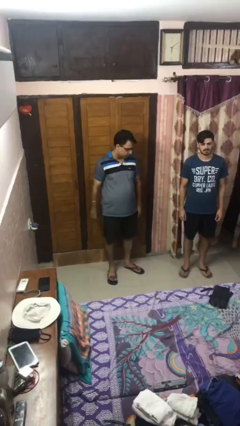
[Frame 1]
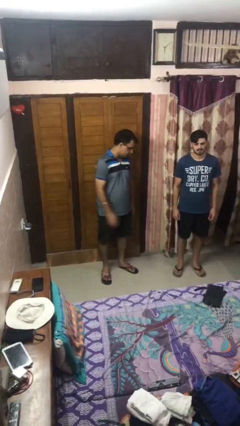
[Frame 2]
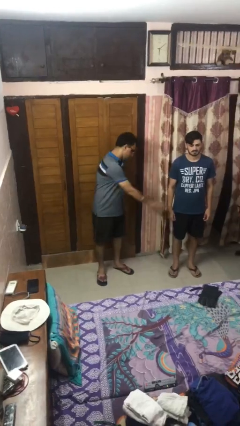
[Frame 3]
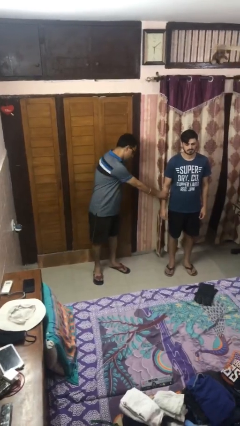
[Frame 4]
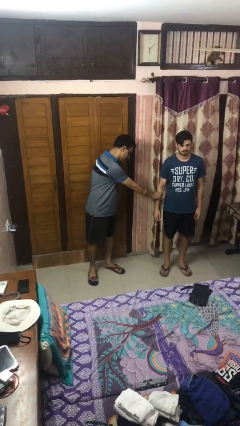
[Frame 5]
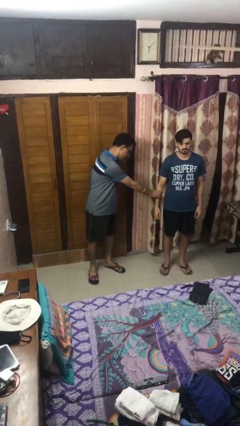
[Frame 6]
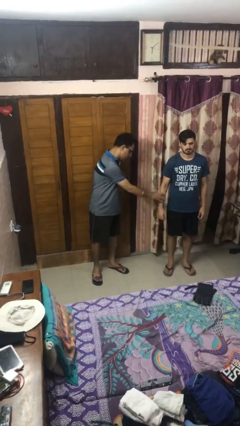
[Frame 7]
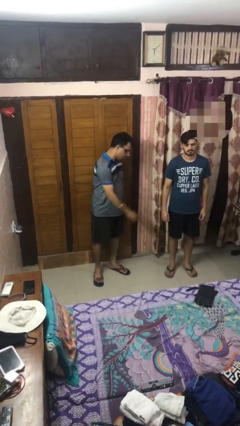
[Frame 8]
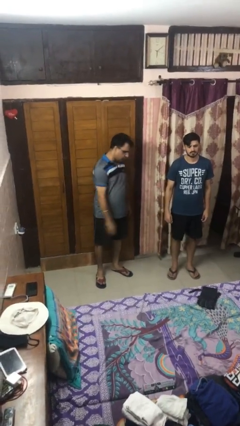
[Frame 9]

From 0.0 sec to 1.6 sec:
person grabs person by forearm

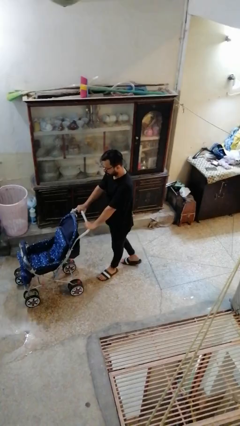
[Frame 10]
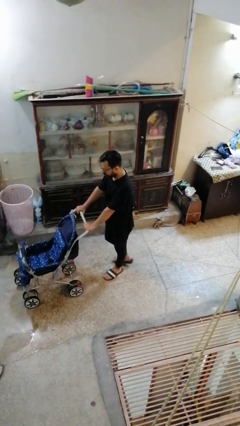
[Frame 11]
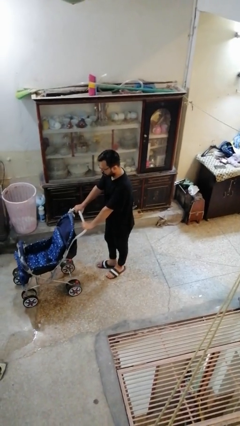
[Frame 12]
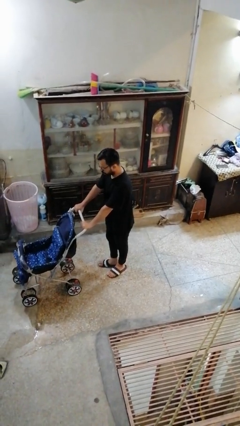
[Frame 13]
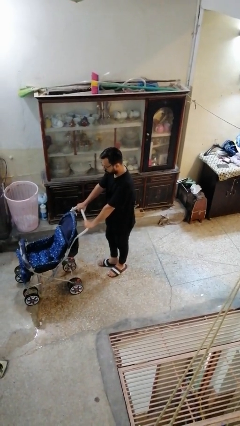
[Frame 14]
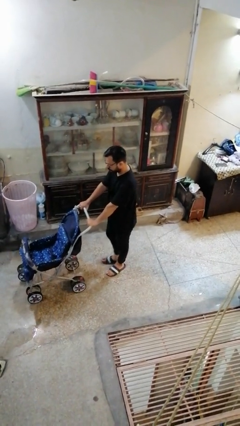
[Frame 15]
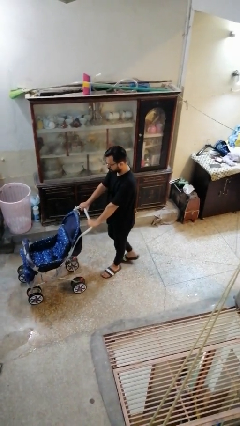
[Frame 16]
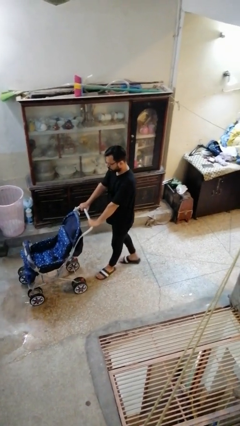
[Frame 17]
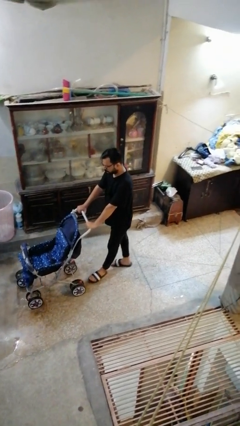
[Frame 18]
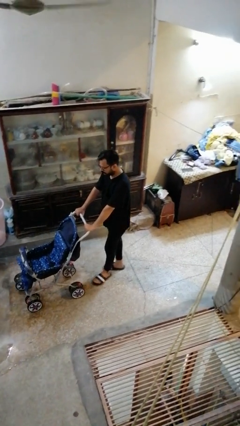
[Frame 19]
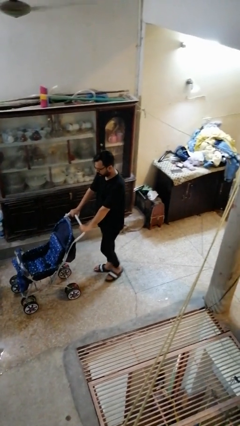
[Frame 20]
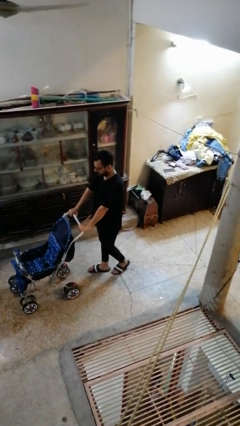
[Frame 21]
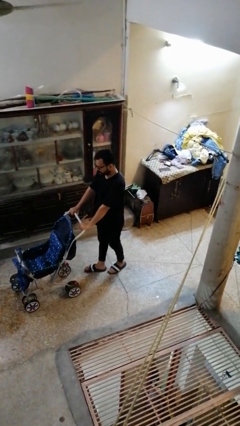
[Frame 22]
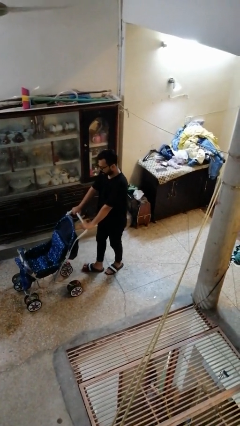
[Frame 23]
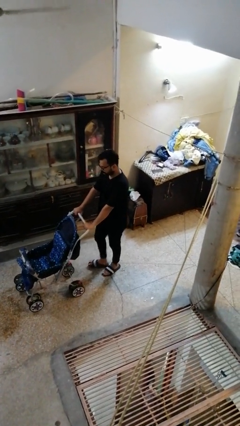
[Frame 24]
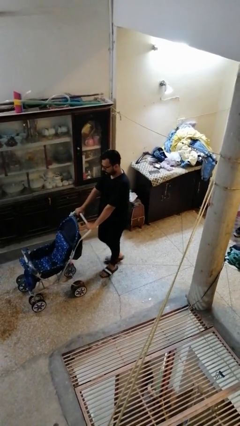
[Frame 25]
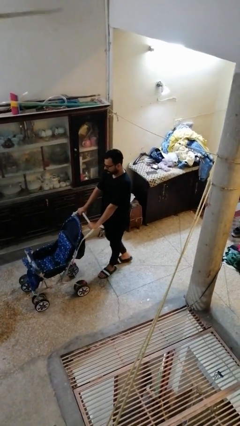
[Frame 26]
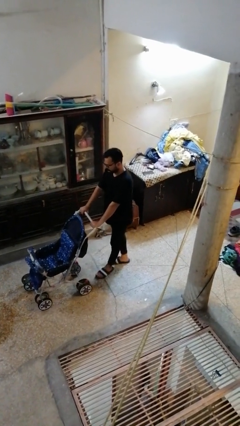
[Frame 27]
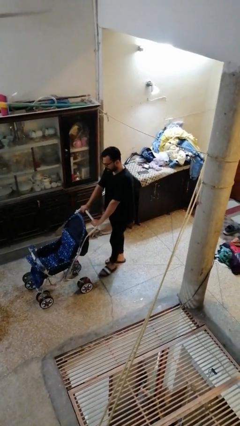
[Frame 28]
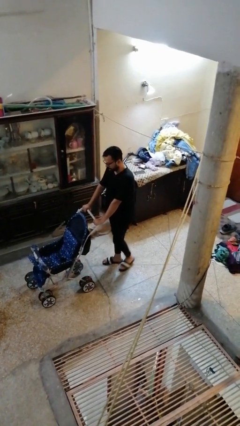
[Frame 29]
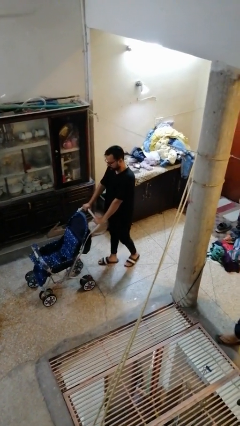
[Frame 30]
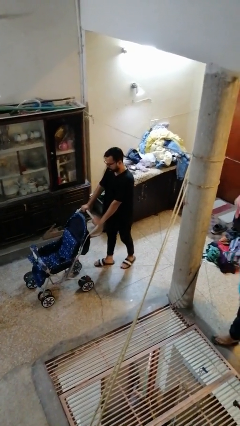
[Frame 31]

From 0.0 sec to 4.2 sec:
person pulls wheeled cart

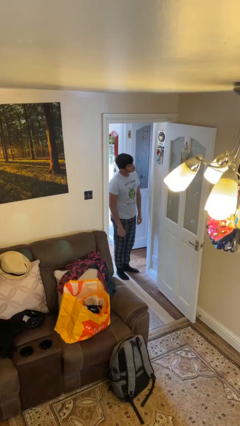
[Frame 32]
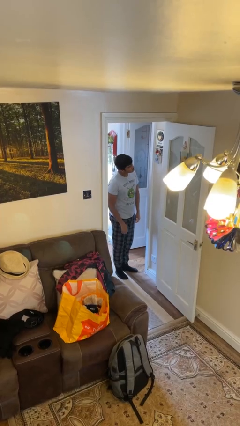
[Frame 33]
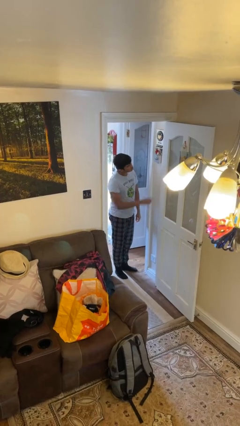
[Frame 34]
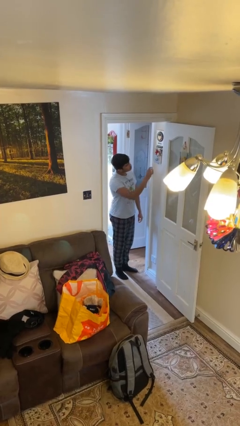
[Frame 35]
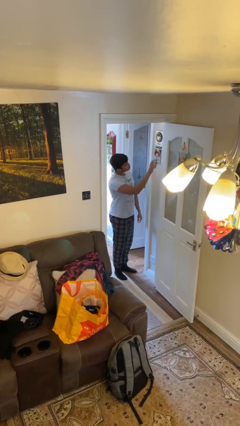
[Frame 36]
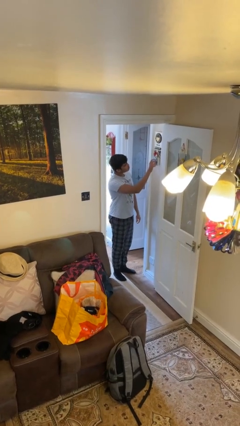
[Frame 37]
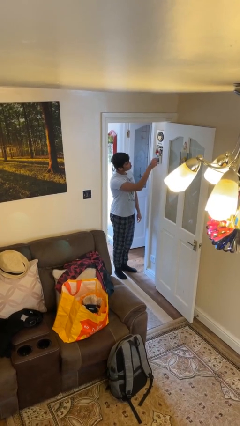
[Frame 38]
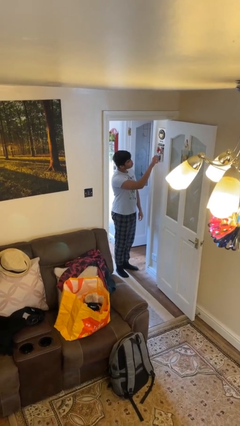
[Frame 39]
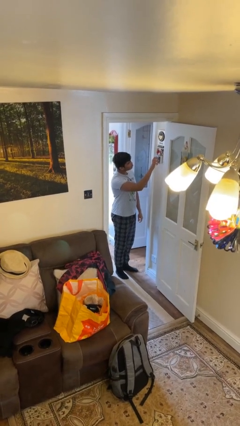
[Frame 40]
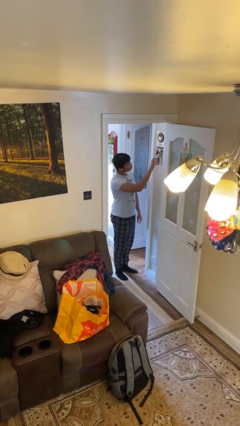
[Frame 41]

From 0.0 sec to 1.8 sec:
person adjusts thermostat

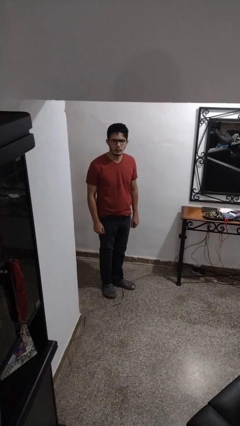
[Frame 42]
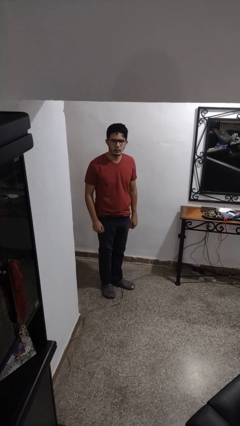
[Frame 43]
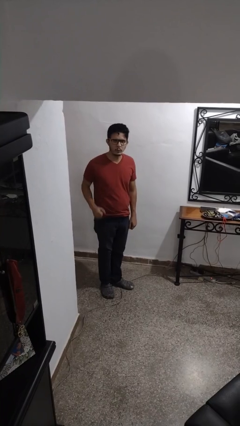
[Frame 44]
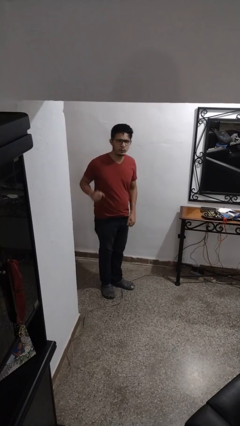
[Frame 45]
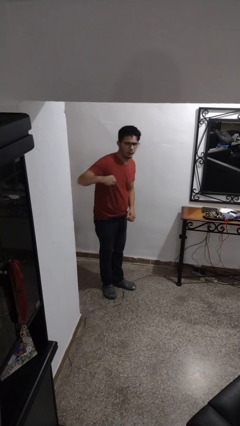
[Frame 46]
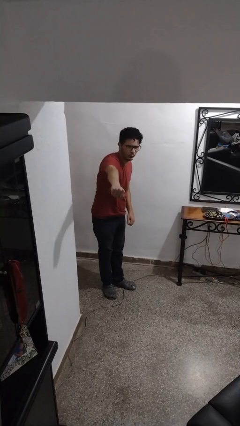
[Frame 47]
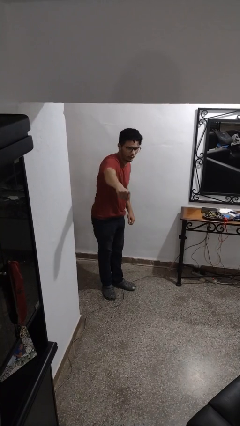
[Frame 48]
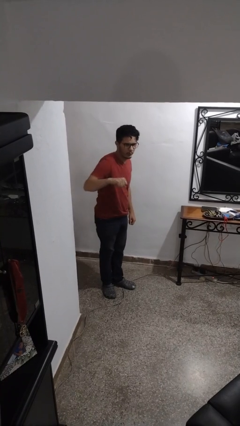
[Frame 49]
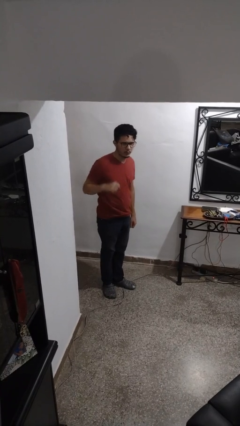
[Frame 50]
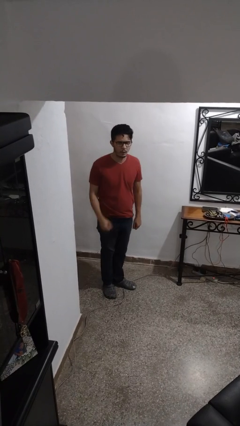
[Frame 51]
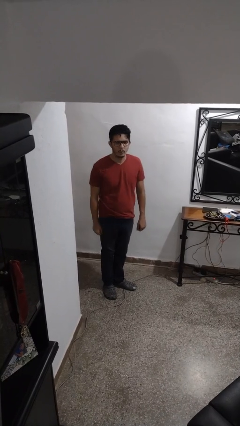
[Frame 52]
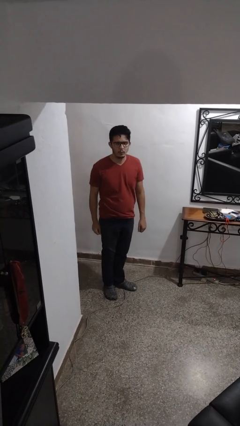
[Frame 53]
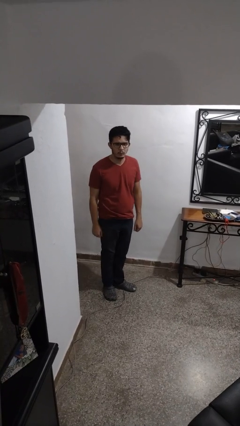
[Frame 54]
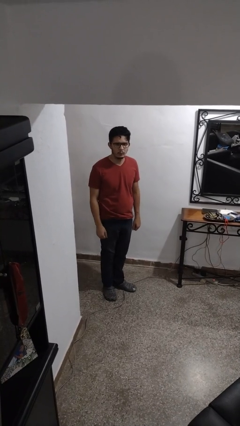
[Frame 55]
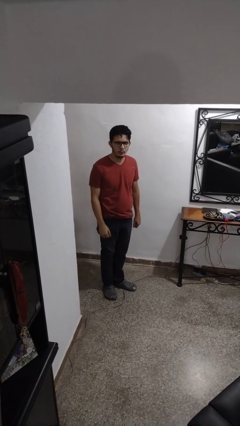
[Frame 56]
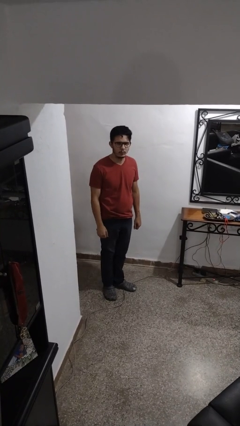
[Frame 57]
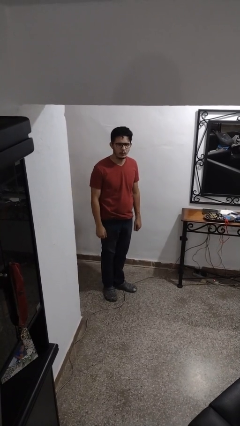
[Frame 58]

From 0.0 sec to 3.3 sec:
person karate chop

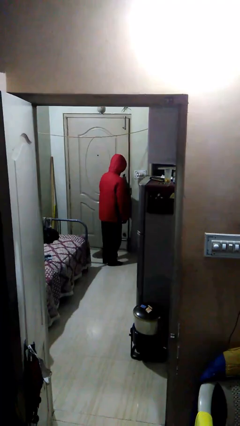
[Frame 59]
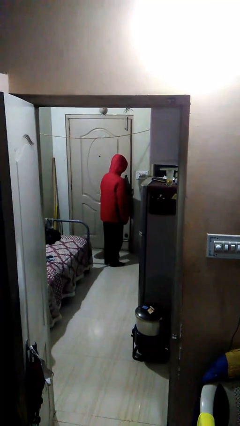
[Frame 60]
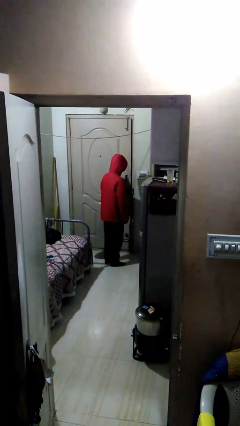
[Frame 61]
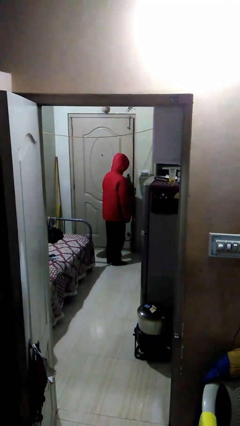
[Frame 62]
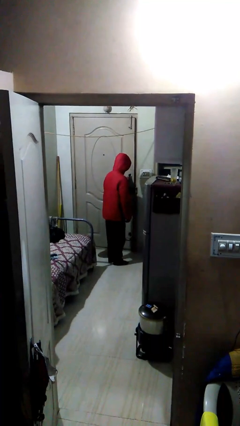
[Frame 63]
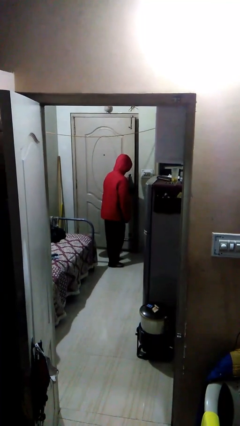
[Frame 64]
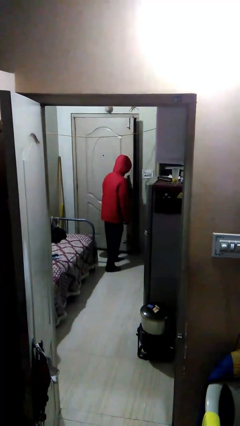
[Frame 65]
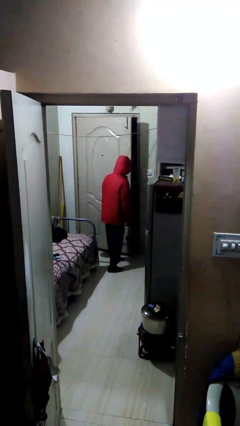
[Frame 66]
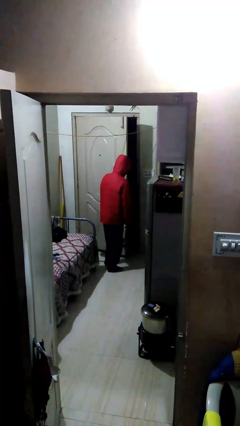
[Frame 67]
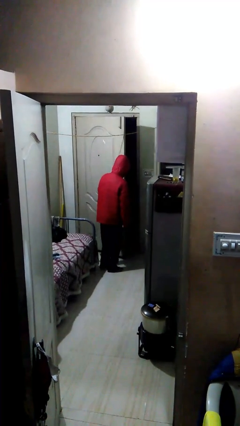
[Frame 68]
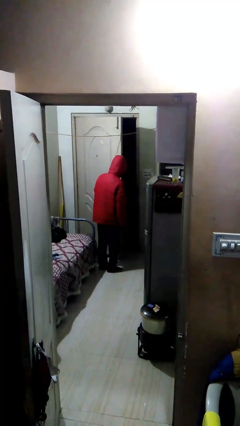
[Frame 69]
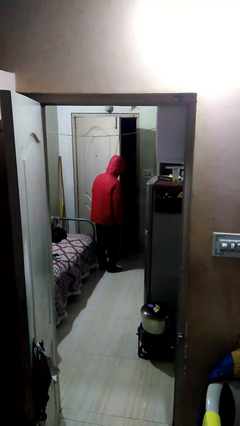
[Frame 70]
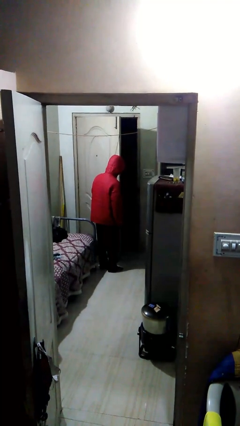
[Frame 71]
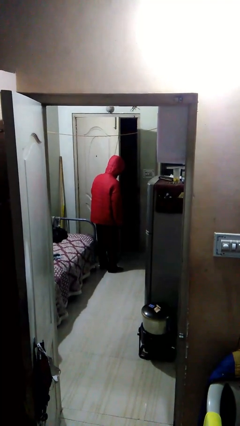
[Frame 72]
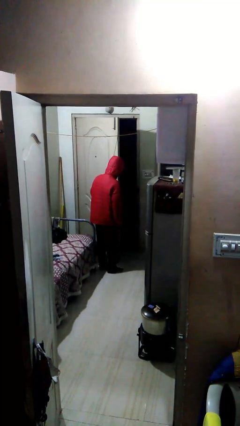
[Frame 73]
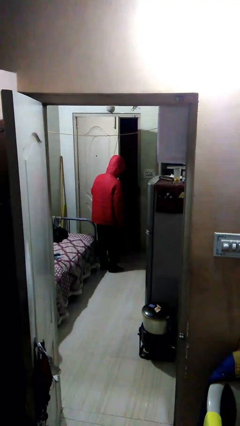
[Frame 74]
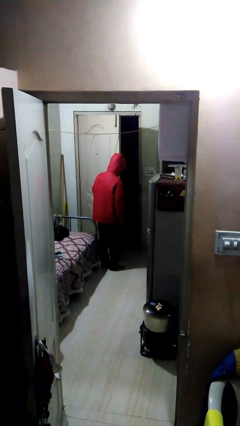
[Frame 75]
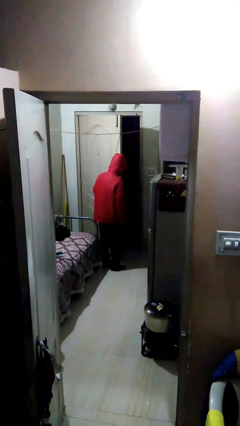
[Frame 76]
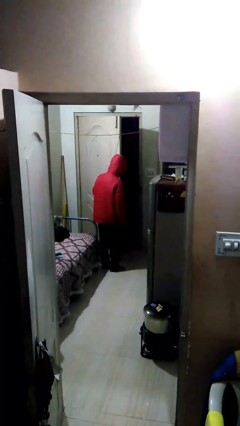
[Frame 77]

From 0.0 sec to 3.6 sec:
person opens facility door

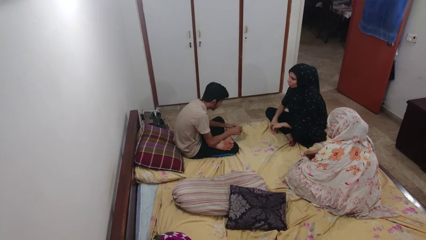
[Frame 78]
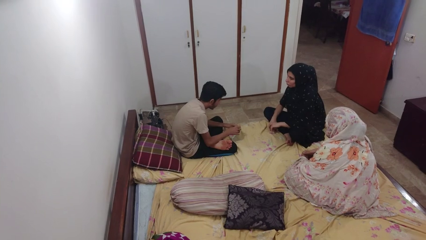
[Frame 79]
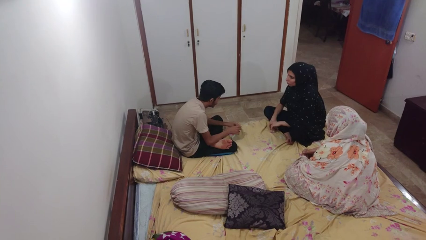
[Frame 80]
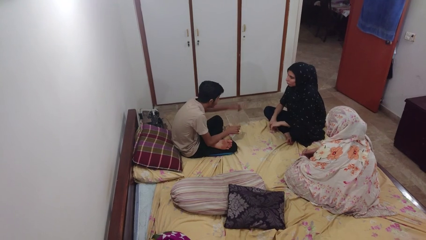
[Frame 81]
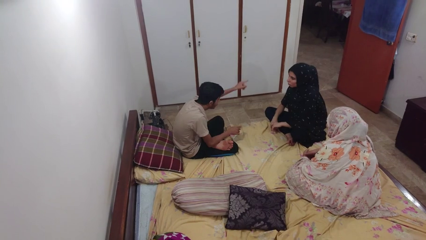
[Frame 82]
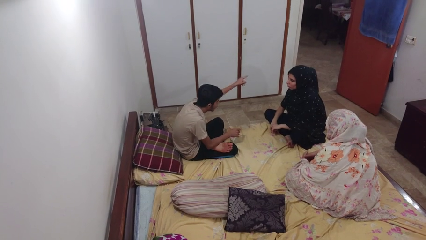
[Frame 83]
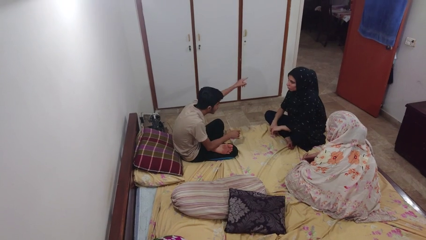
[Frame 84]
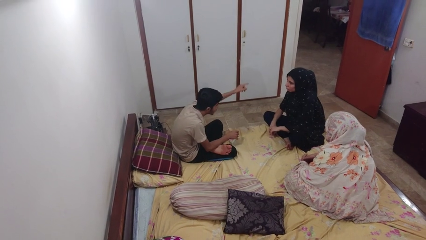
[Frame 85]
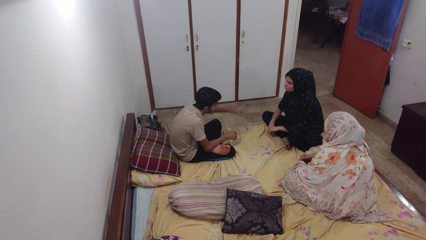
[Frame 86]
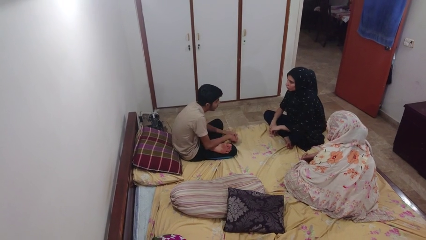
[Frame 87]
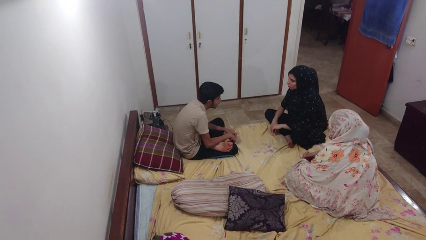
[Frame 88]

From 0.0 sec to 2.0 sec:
person points at person

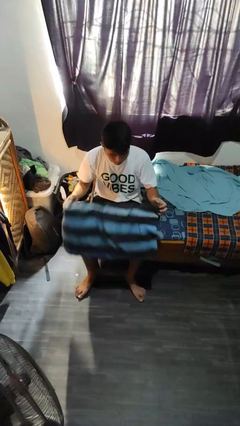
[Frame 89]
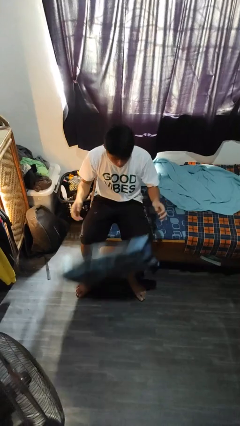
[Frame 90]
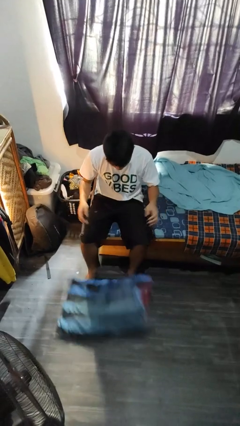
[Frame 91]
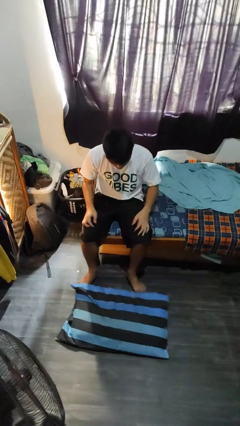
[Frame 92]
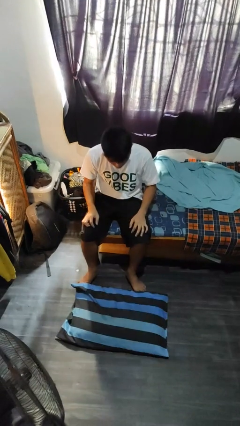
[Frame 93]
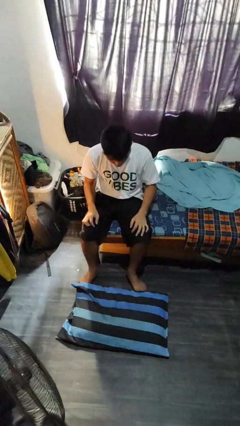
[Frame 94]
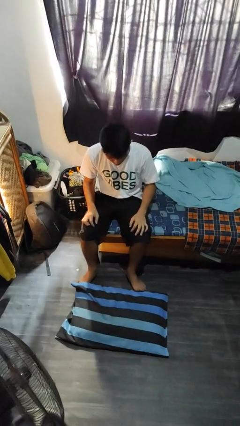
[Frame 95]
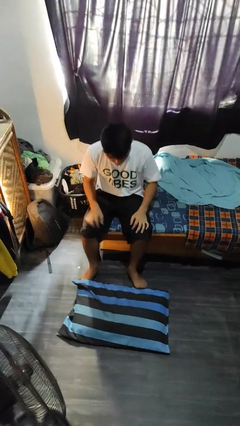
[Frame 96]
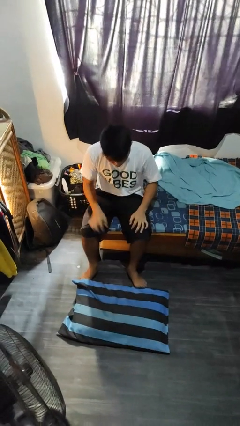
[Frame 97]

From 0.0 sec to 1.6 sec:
person drops object
